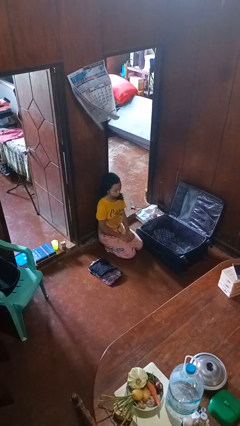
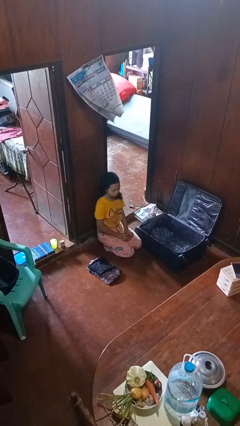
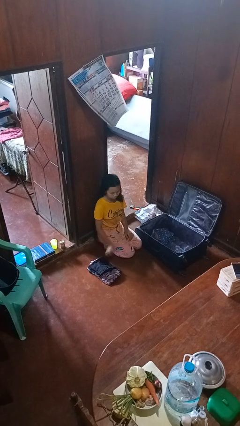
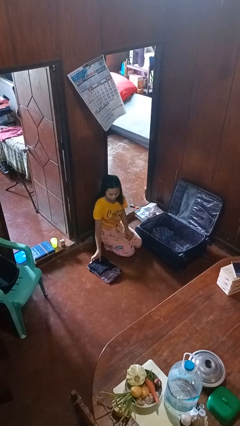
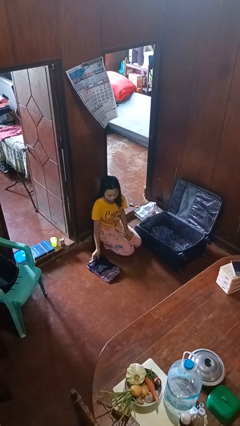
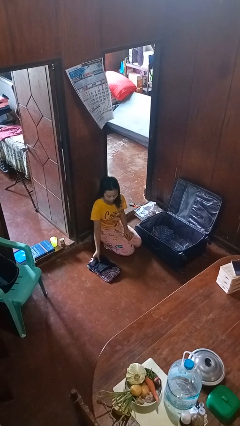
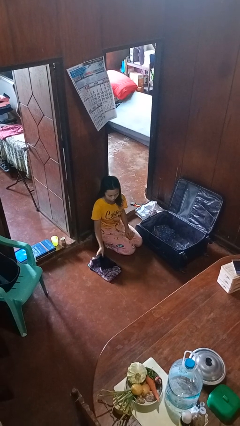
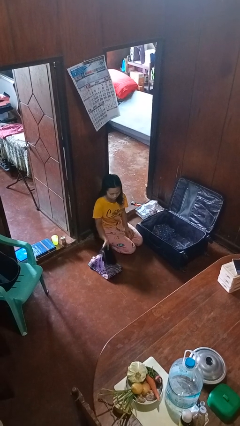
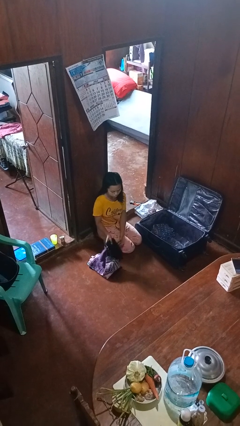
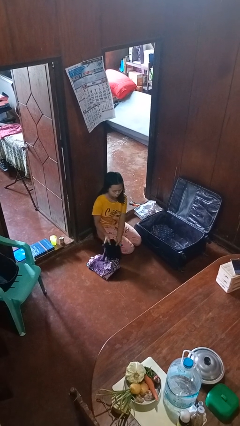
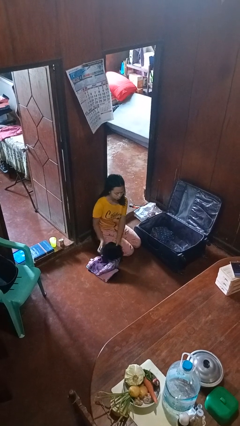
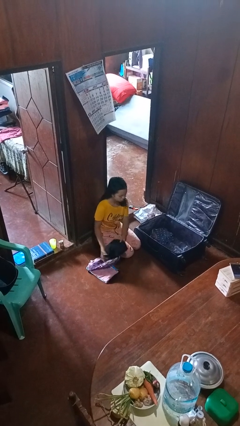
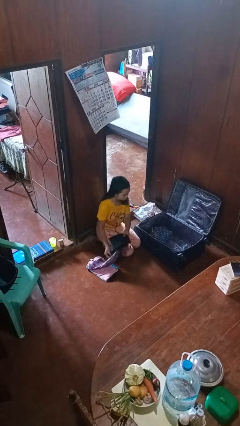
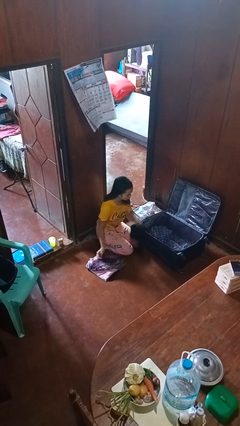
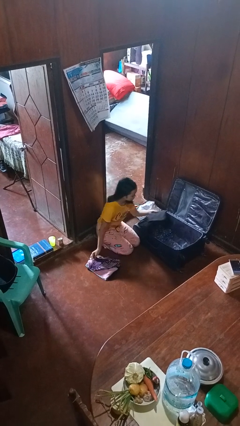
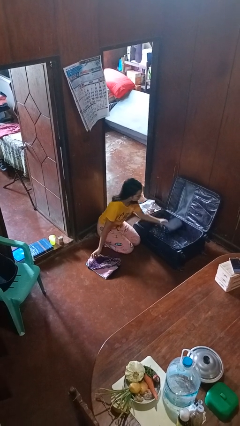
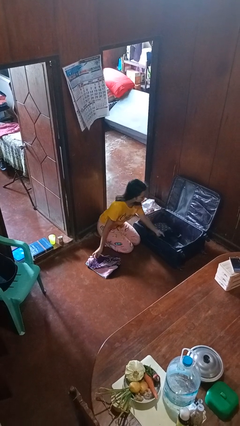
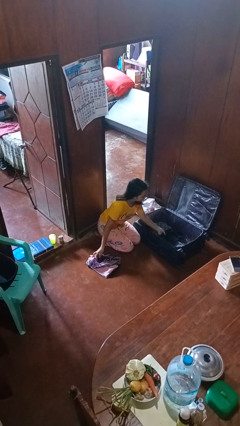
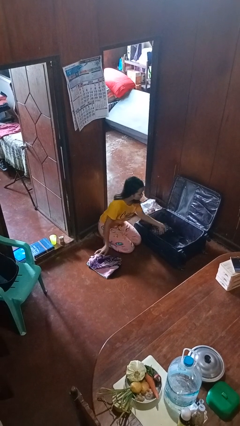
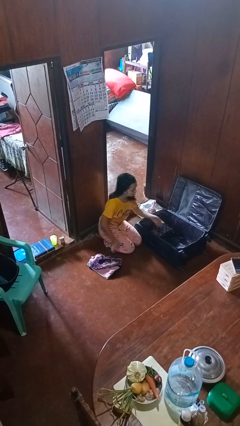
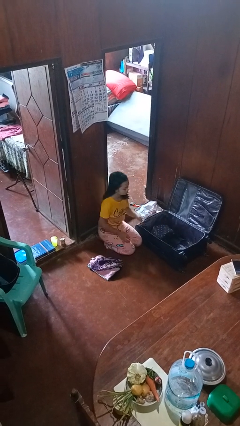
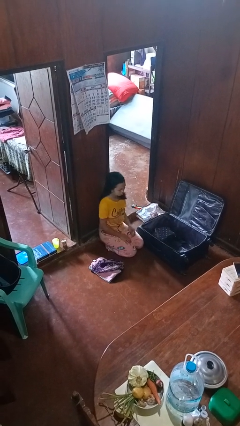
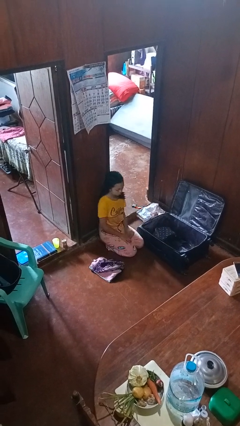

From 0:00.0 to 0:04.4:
person loads clothes into suitcase

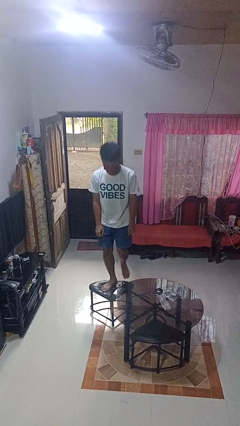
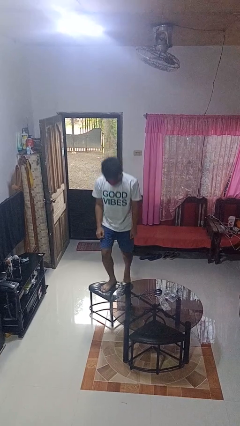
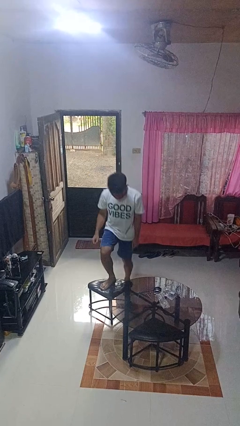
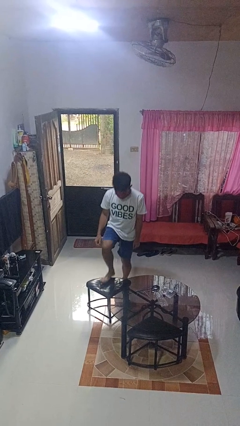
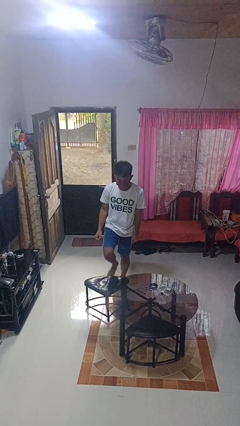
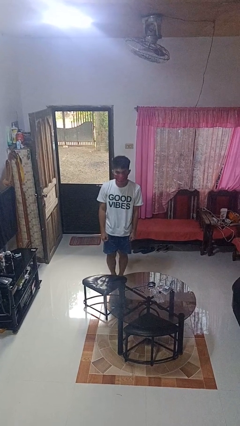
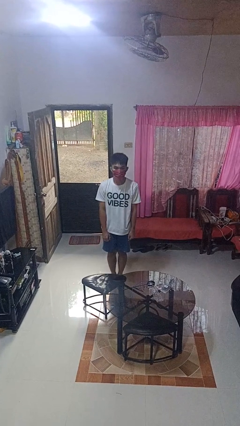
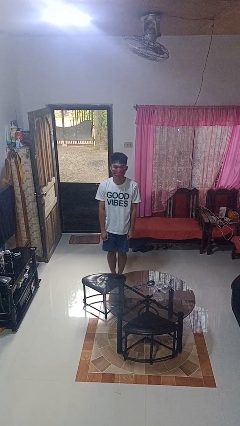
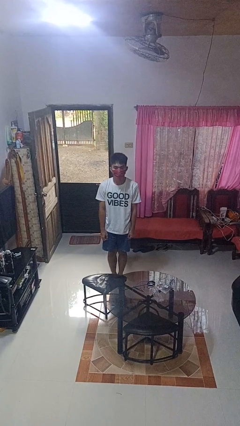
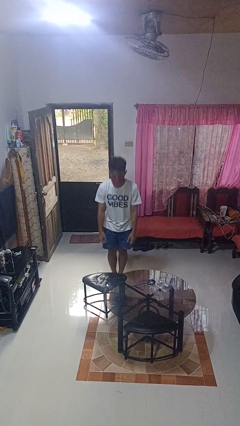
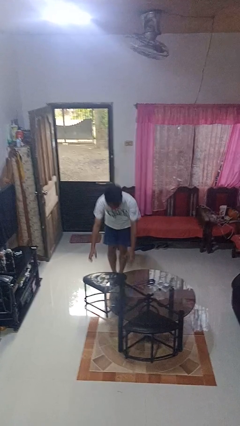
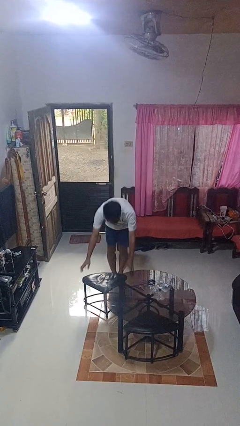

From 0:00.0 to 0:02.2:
person climbs off chair

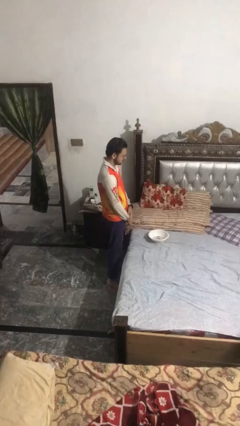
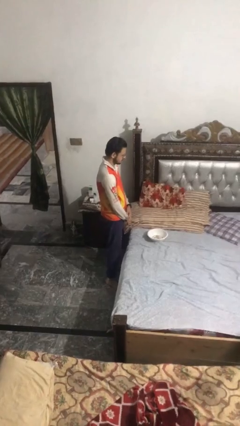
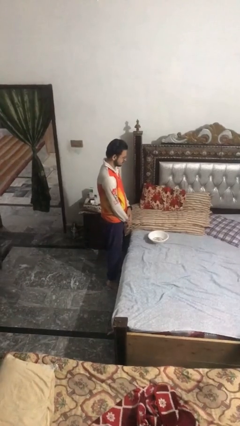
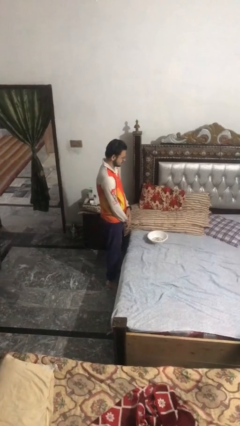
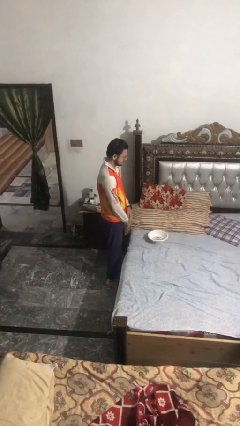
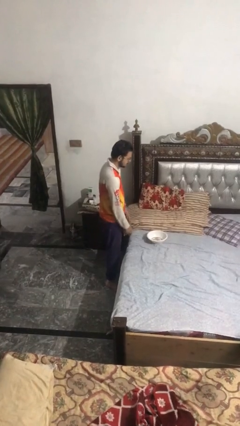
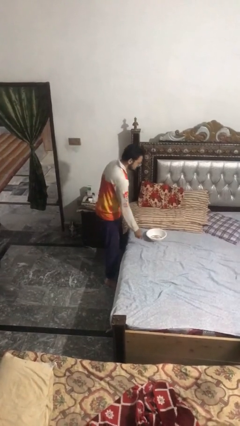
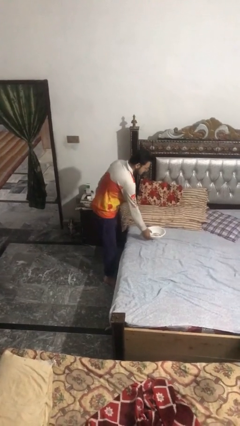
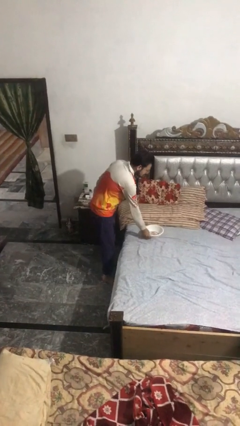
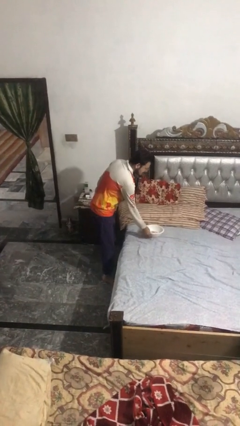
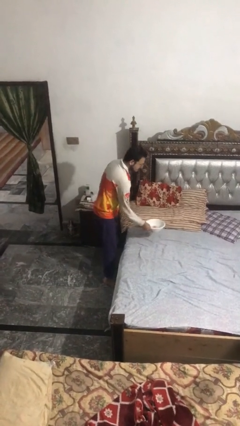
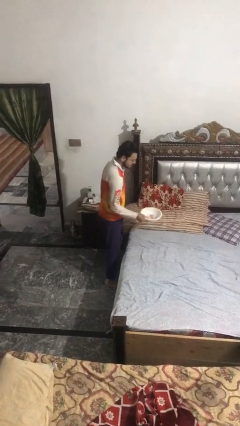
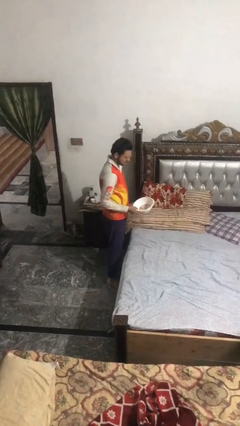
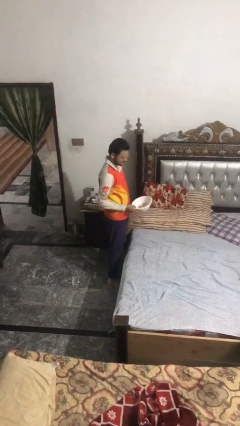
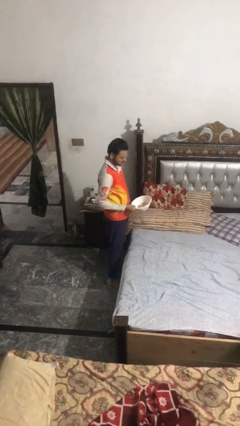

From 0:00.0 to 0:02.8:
person picks up object from countertop

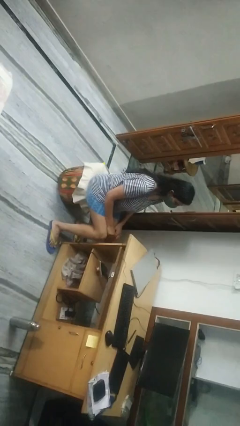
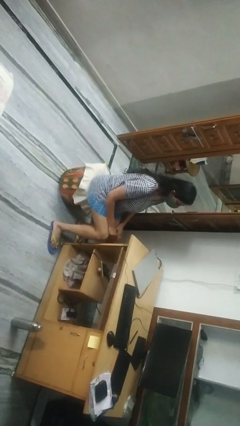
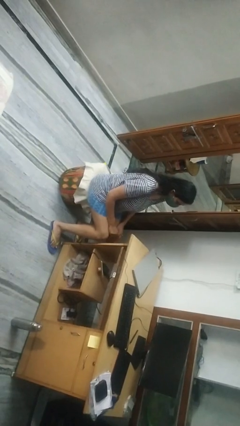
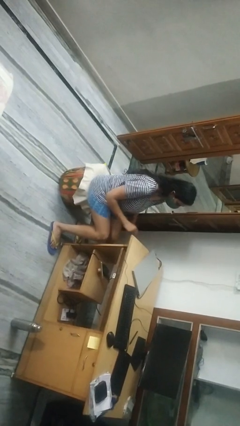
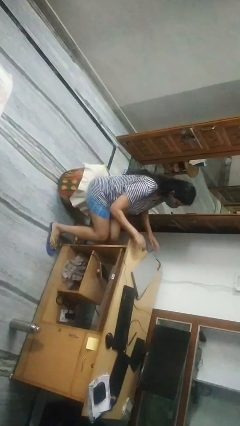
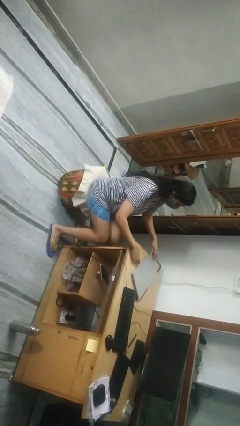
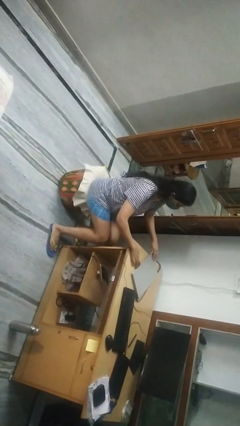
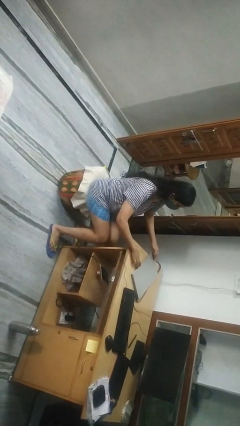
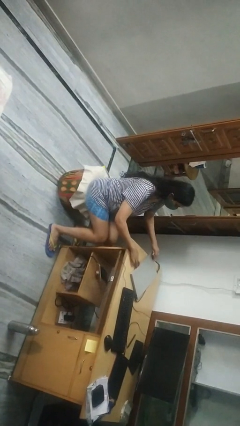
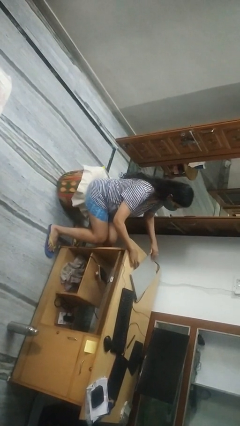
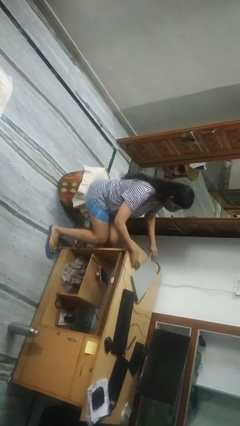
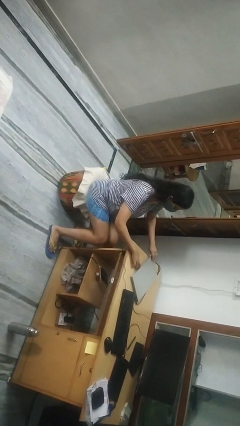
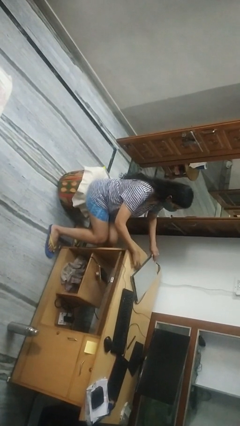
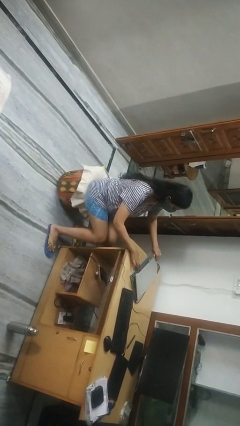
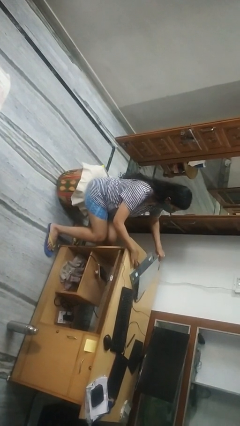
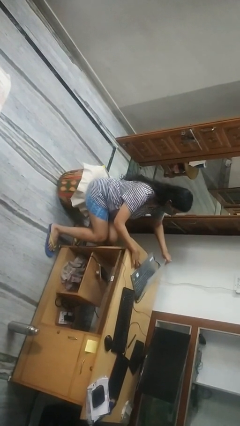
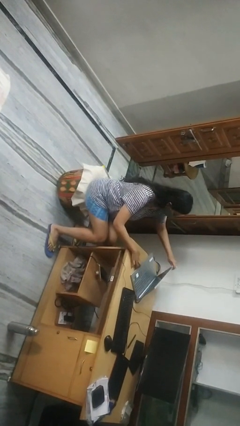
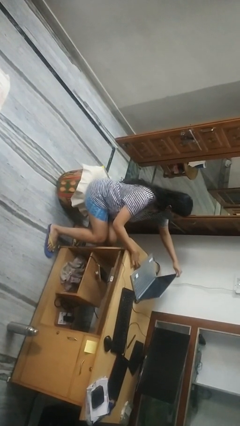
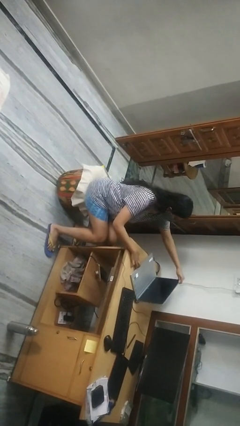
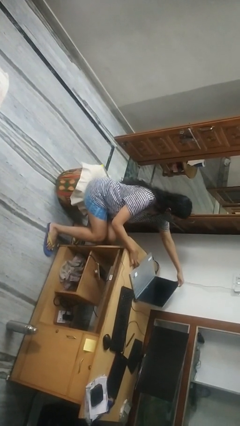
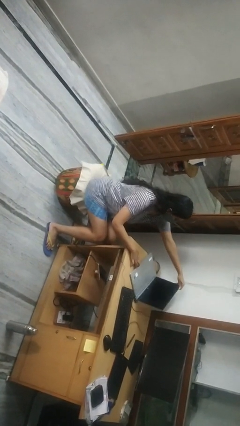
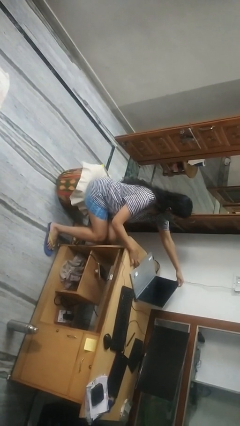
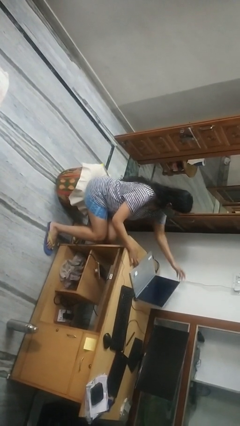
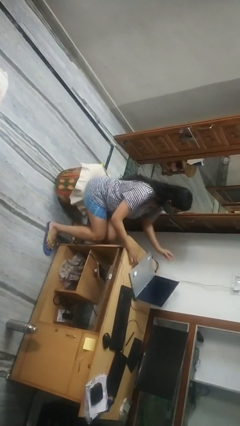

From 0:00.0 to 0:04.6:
person opens laptop

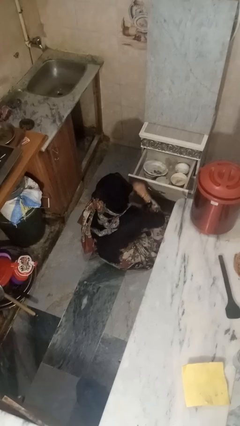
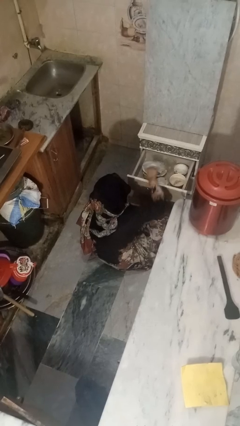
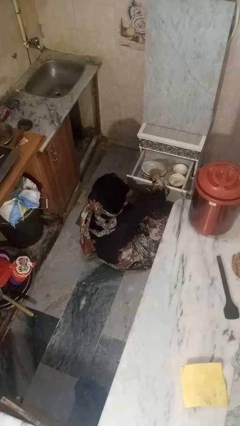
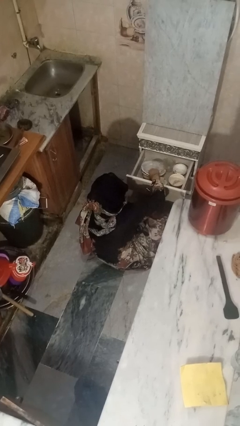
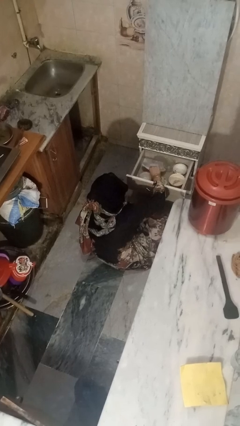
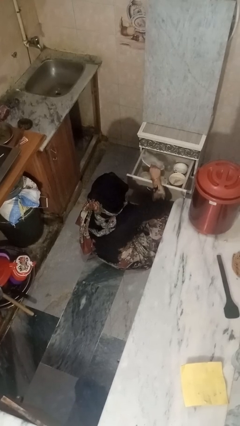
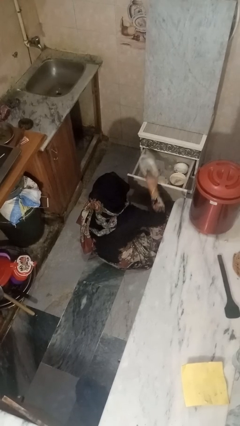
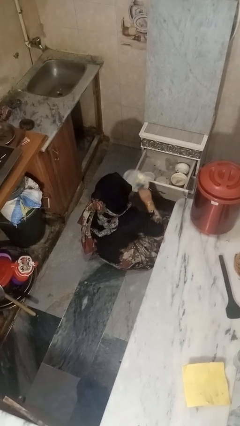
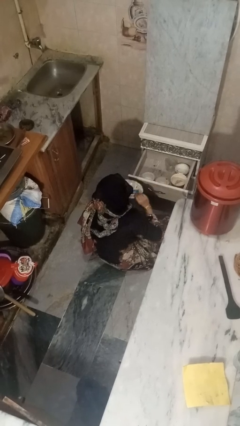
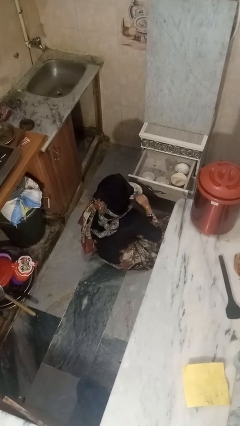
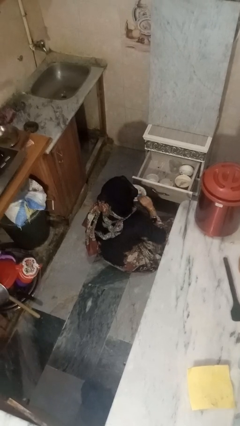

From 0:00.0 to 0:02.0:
person takes object from kitchen drawer

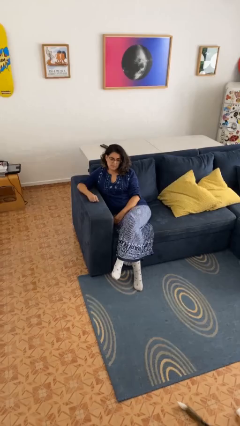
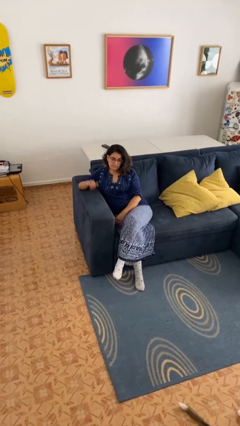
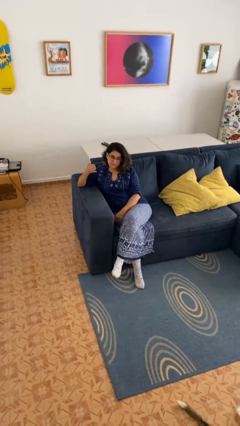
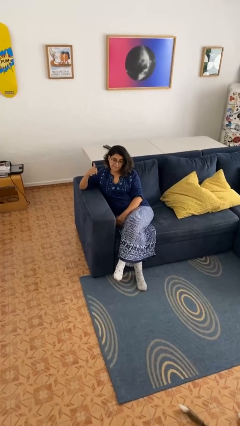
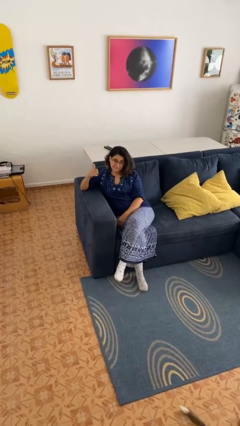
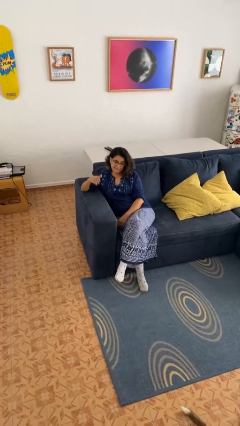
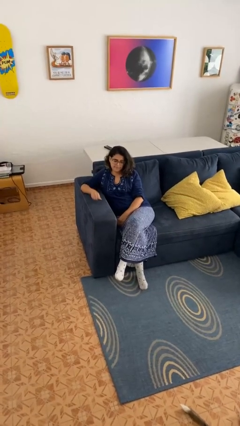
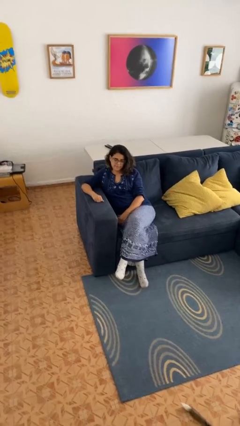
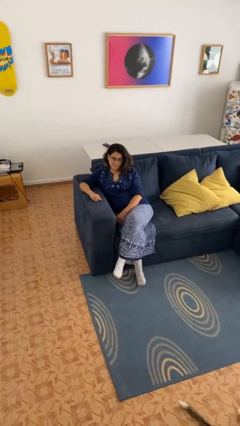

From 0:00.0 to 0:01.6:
person gestures hang loose
